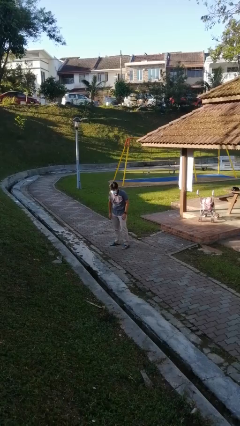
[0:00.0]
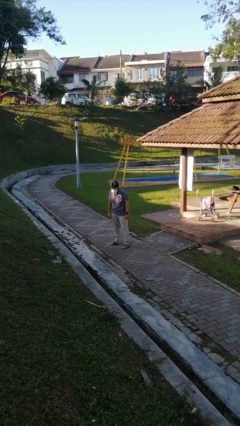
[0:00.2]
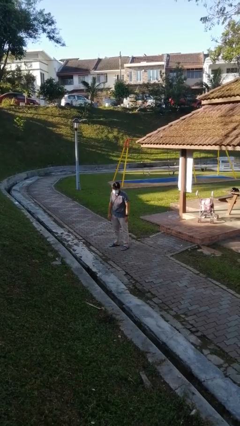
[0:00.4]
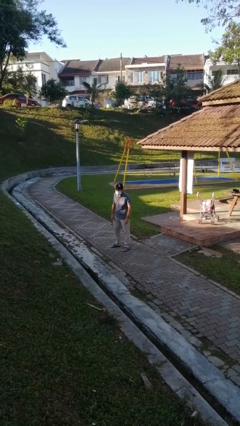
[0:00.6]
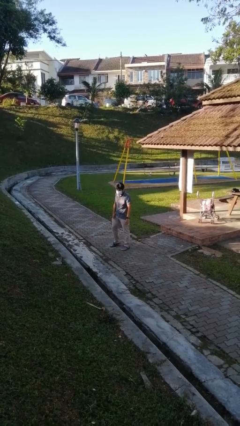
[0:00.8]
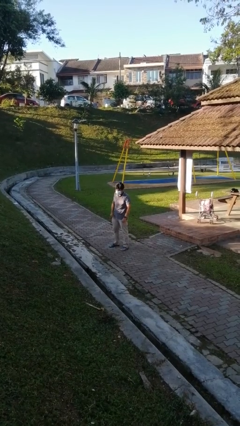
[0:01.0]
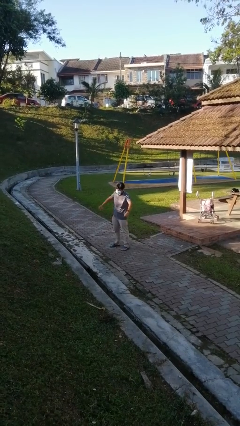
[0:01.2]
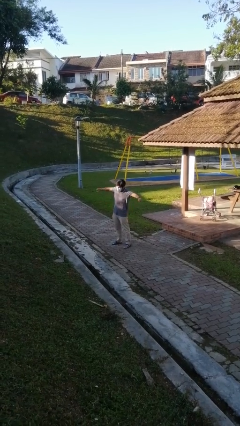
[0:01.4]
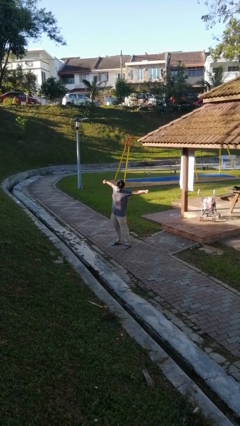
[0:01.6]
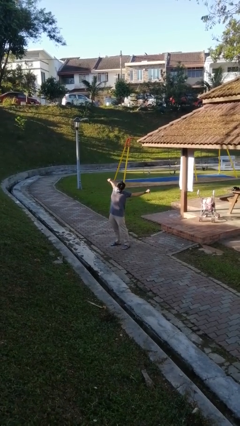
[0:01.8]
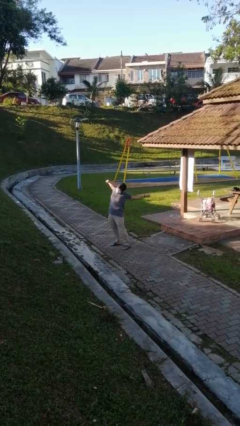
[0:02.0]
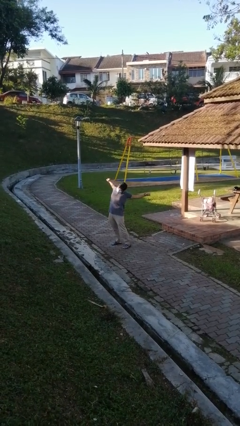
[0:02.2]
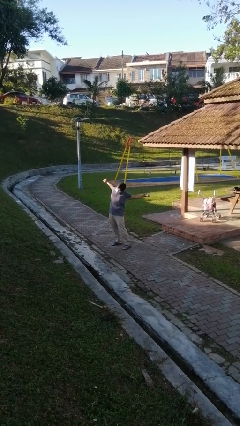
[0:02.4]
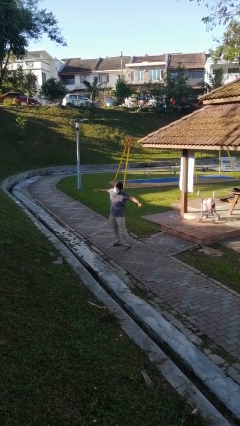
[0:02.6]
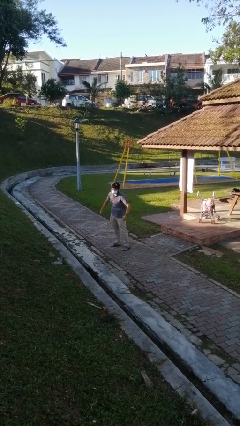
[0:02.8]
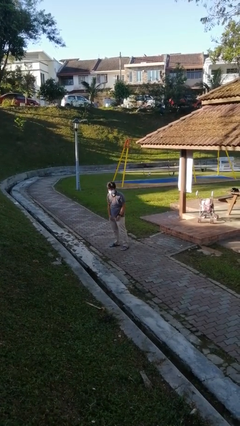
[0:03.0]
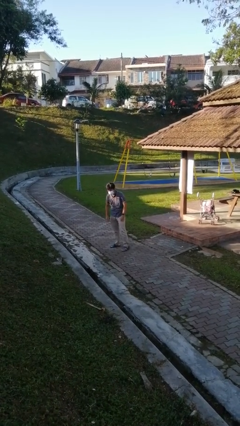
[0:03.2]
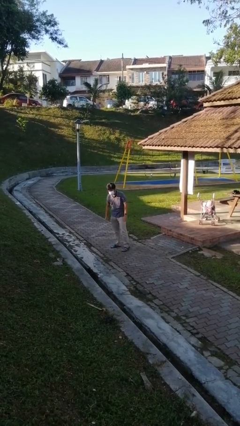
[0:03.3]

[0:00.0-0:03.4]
person stretches arms to side

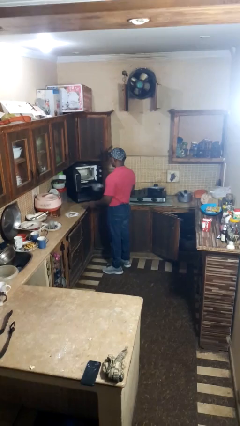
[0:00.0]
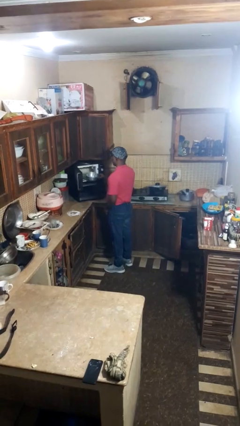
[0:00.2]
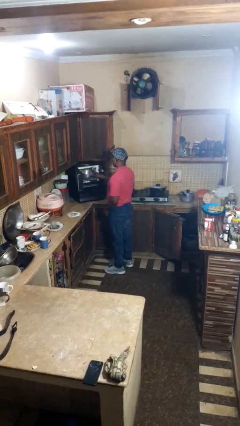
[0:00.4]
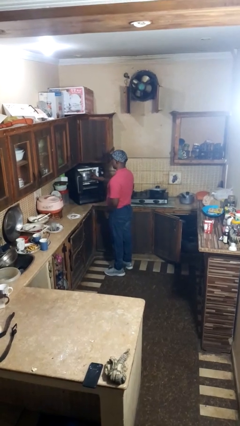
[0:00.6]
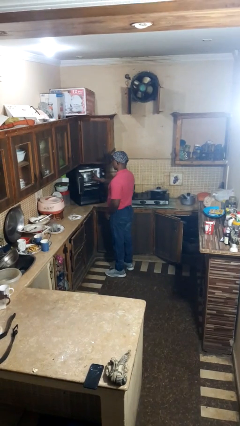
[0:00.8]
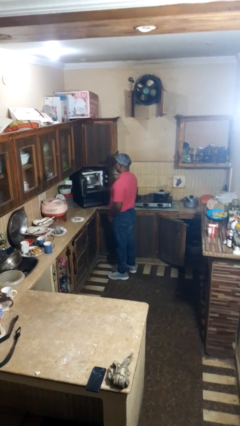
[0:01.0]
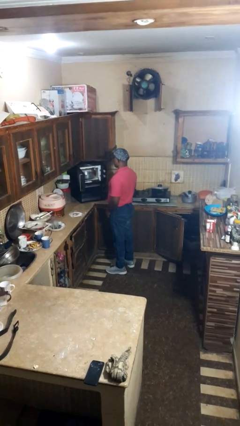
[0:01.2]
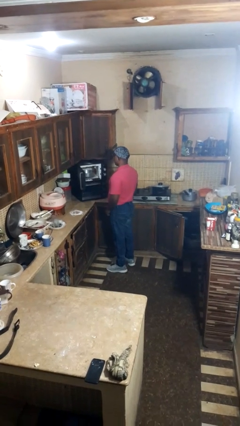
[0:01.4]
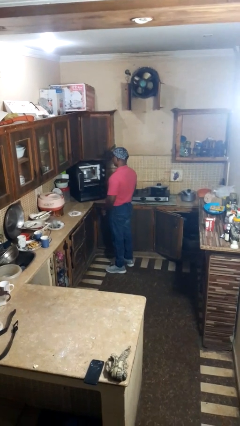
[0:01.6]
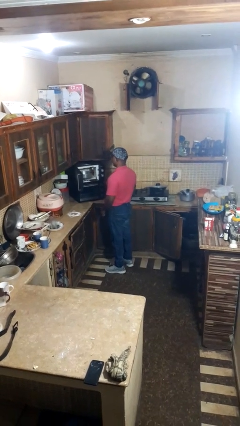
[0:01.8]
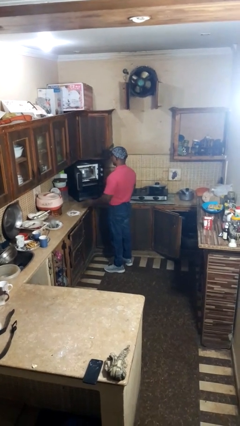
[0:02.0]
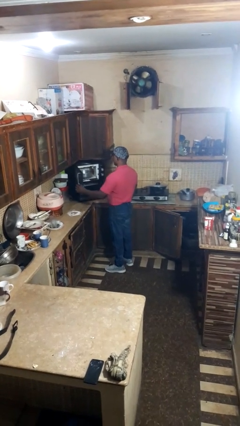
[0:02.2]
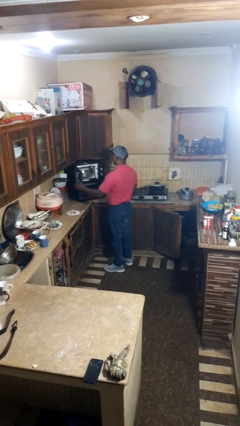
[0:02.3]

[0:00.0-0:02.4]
person puts object into microwave

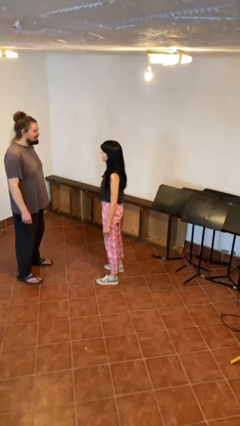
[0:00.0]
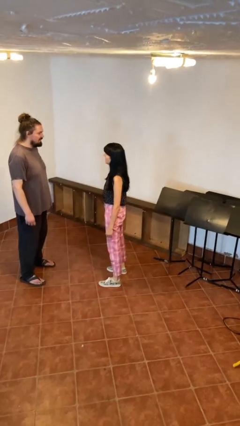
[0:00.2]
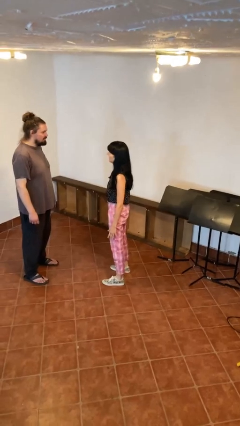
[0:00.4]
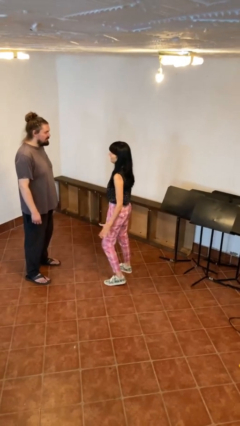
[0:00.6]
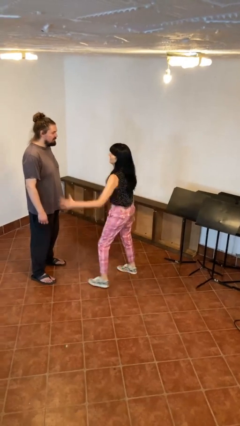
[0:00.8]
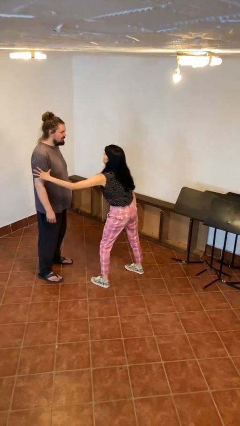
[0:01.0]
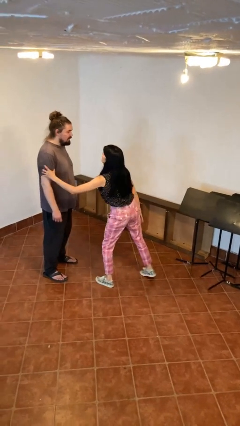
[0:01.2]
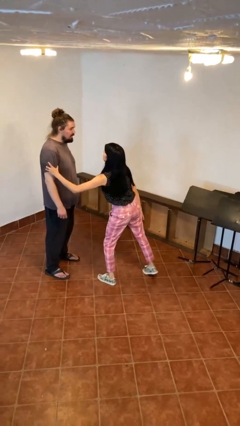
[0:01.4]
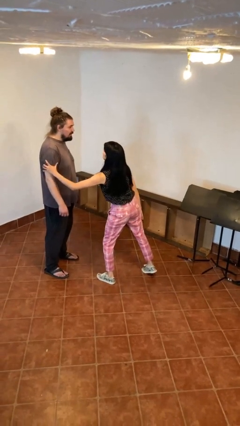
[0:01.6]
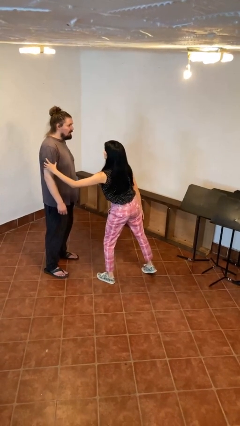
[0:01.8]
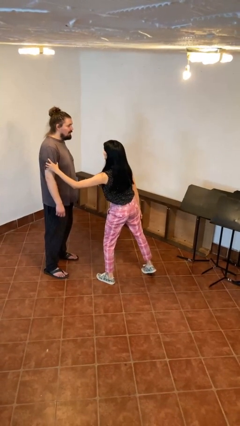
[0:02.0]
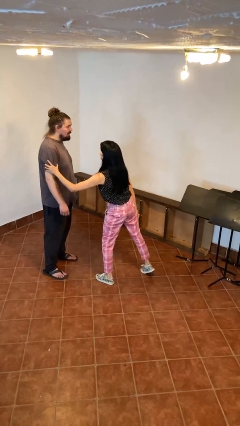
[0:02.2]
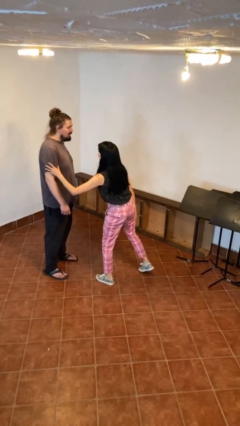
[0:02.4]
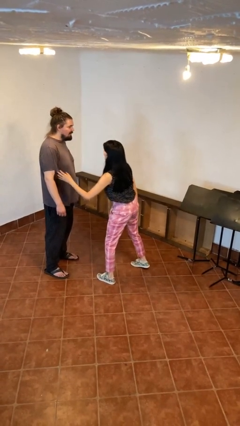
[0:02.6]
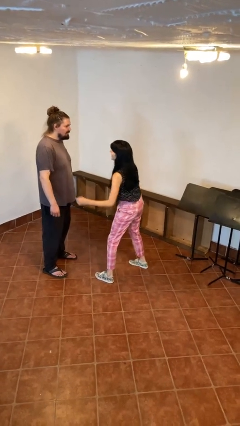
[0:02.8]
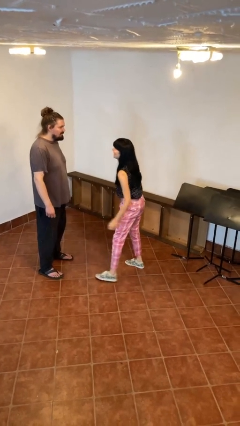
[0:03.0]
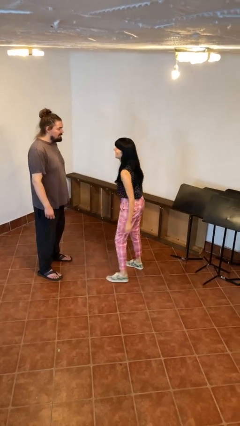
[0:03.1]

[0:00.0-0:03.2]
person grabs person by bicep

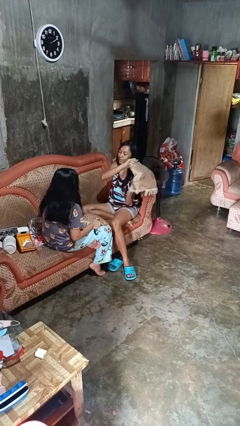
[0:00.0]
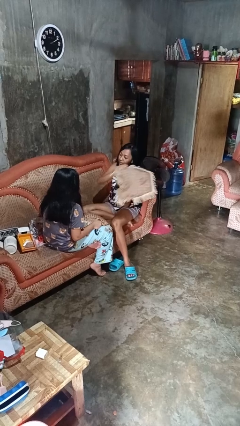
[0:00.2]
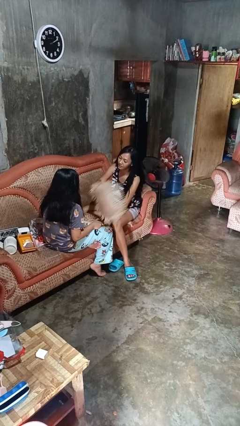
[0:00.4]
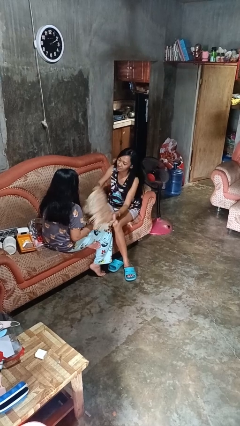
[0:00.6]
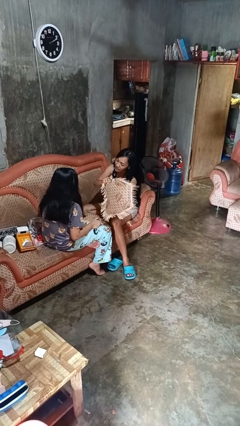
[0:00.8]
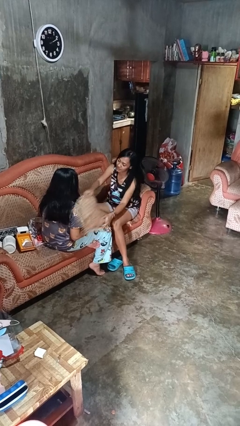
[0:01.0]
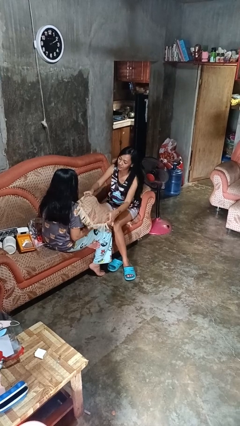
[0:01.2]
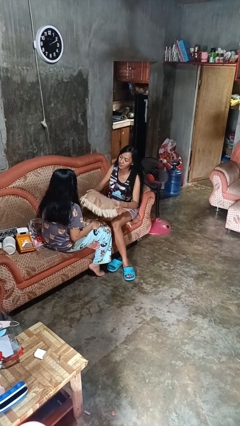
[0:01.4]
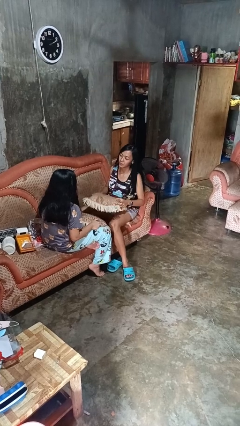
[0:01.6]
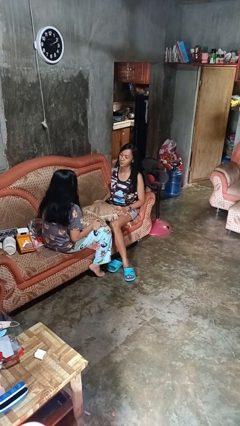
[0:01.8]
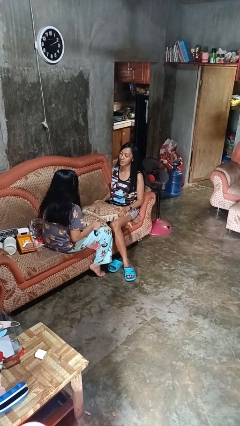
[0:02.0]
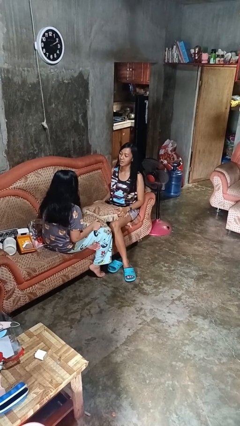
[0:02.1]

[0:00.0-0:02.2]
person hits person with pillow

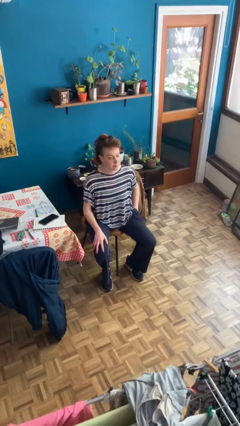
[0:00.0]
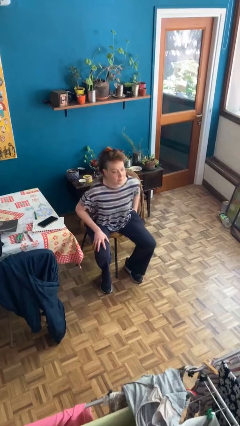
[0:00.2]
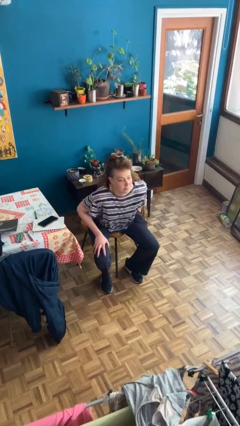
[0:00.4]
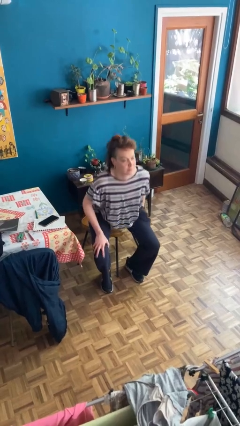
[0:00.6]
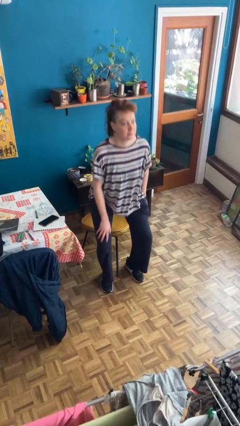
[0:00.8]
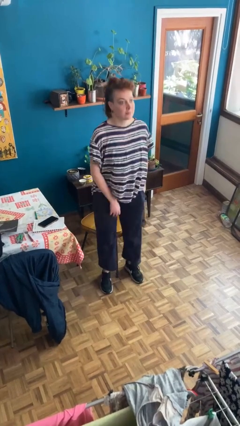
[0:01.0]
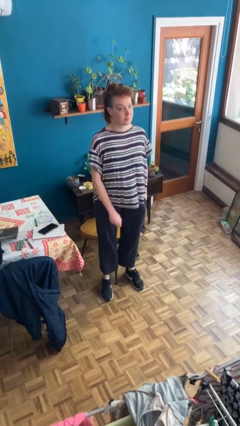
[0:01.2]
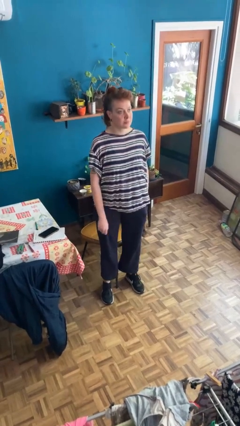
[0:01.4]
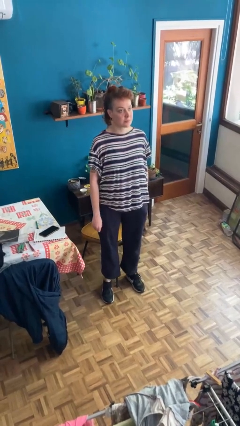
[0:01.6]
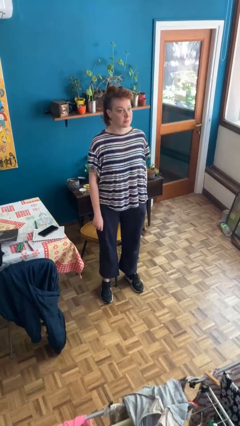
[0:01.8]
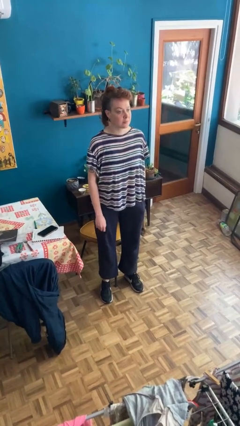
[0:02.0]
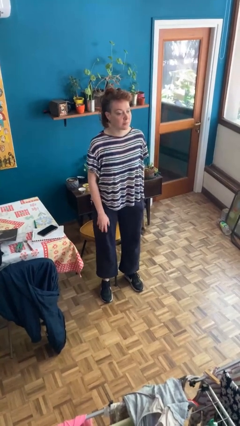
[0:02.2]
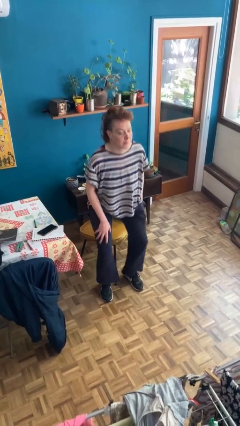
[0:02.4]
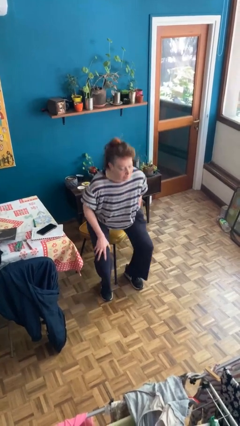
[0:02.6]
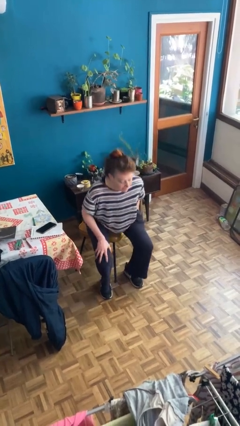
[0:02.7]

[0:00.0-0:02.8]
person stands up

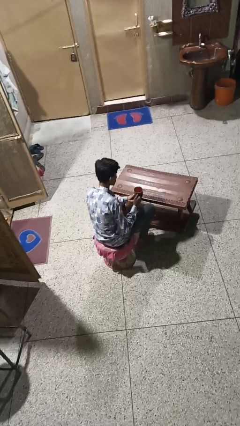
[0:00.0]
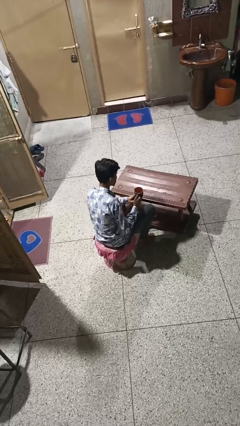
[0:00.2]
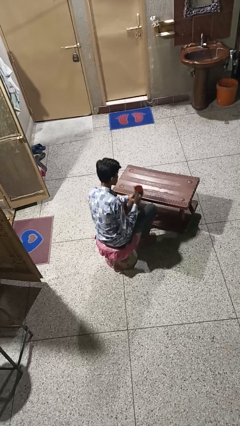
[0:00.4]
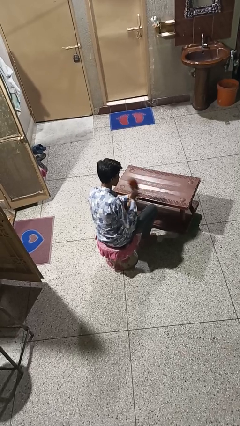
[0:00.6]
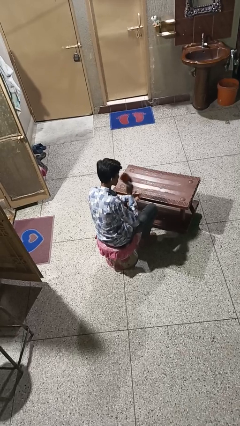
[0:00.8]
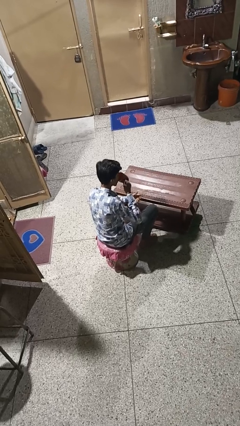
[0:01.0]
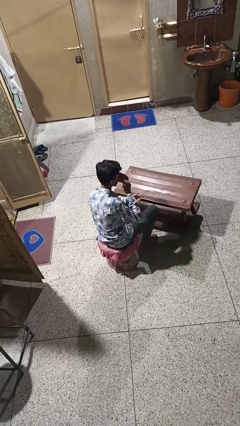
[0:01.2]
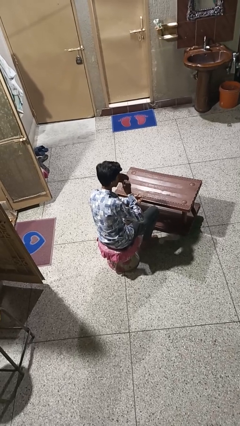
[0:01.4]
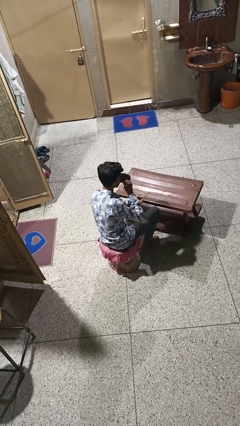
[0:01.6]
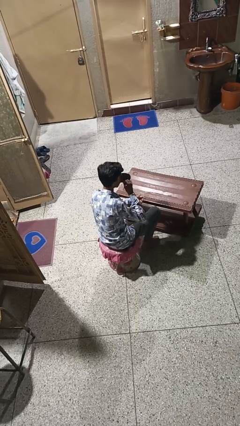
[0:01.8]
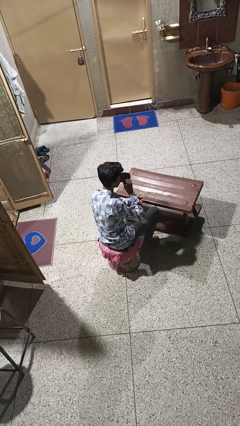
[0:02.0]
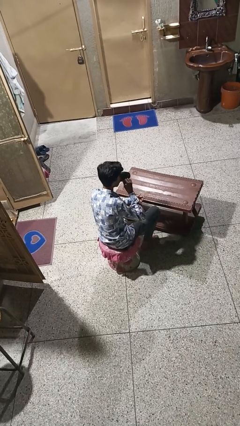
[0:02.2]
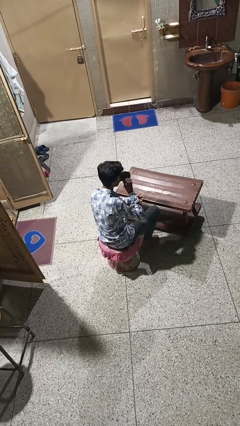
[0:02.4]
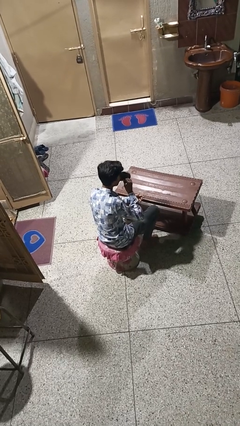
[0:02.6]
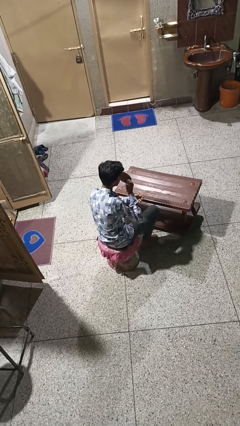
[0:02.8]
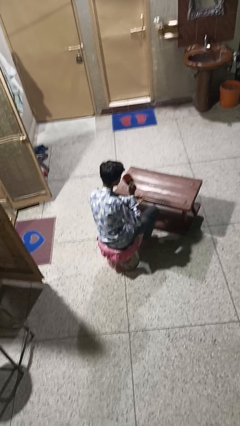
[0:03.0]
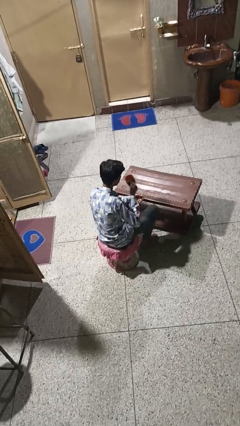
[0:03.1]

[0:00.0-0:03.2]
person drinks from mug
